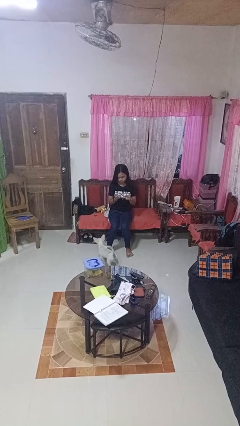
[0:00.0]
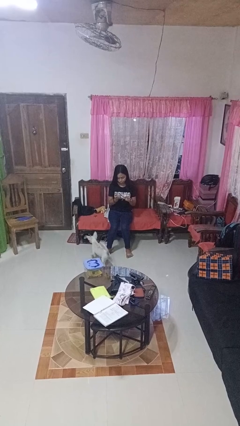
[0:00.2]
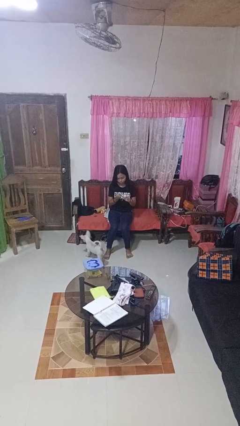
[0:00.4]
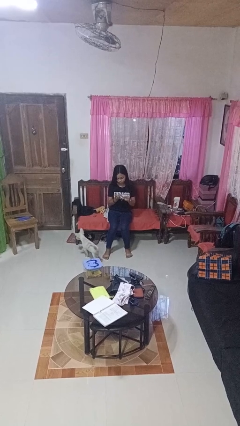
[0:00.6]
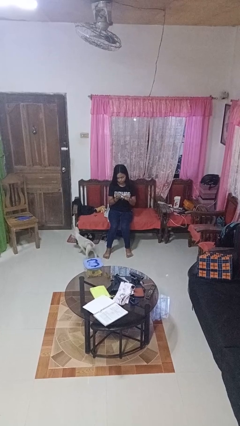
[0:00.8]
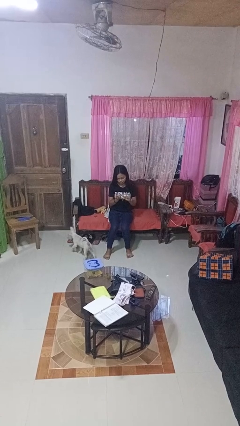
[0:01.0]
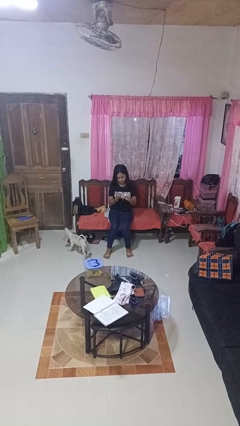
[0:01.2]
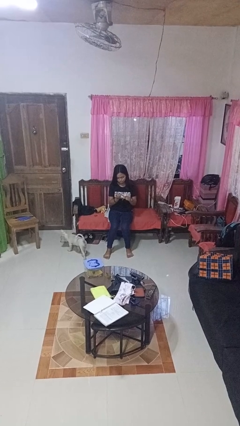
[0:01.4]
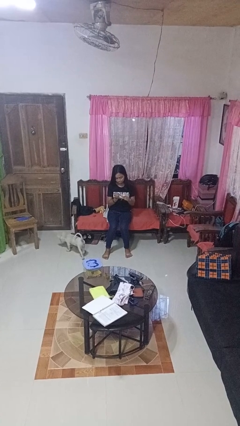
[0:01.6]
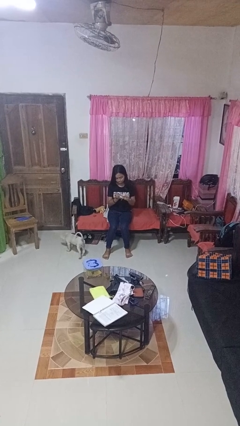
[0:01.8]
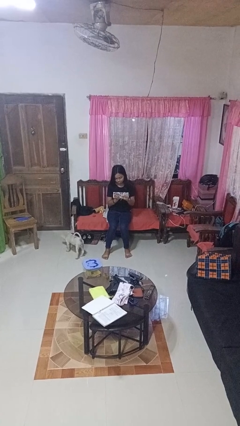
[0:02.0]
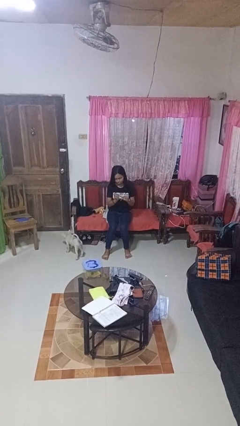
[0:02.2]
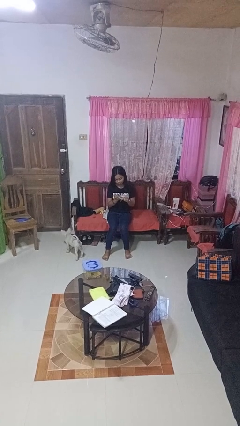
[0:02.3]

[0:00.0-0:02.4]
person files fingernails

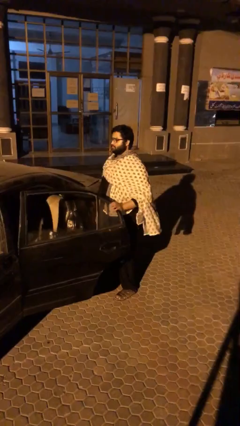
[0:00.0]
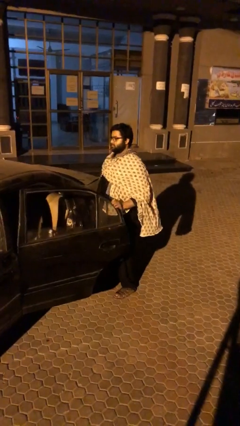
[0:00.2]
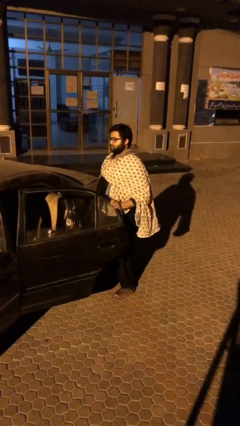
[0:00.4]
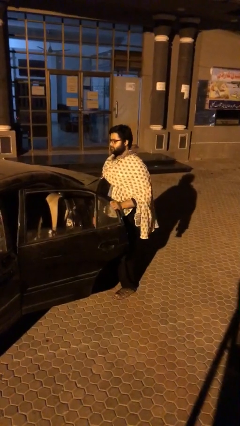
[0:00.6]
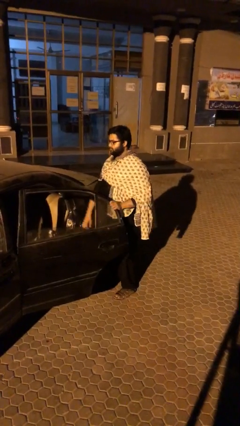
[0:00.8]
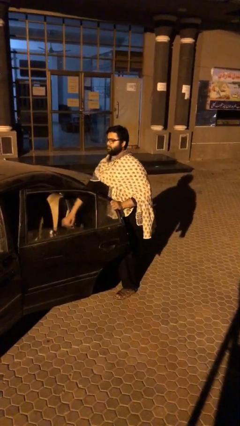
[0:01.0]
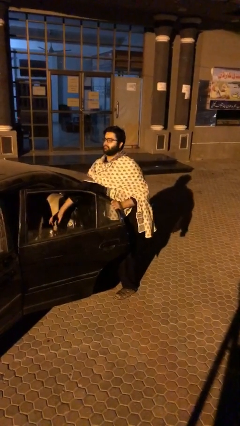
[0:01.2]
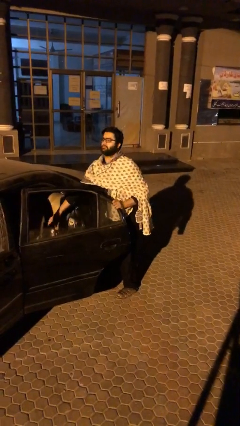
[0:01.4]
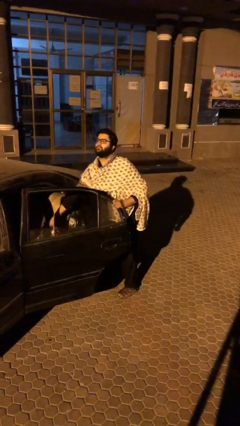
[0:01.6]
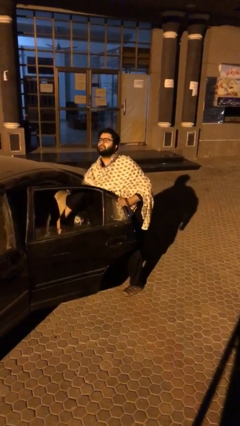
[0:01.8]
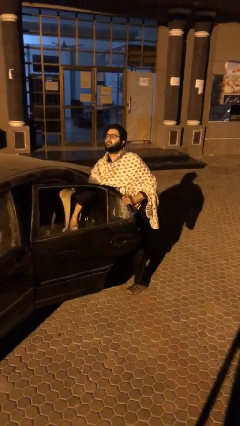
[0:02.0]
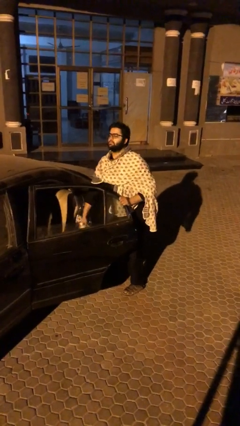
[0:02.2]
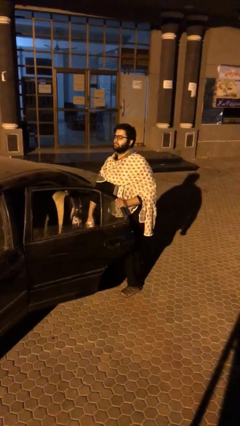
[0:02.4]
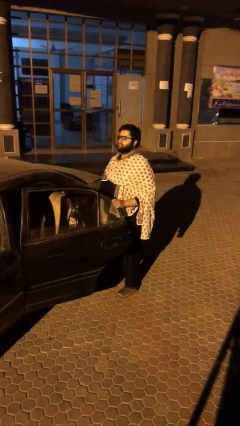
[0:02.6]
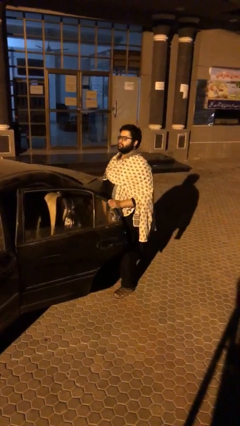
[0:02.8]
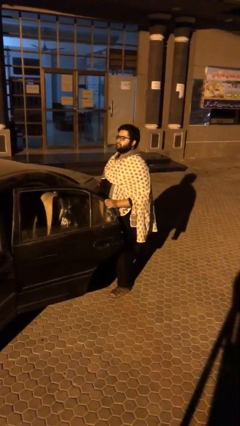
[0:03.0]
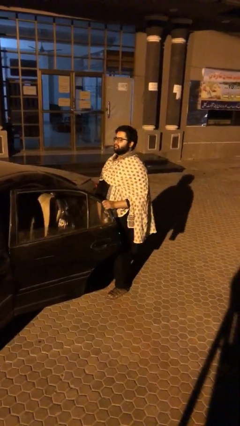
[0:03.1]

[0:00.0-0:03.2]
person unloads car

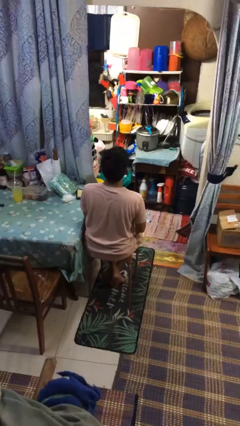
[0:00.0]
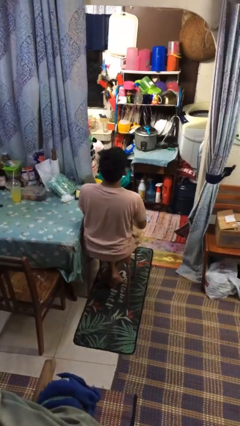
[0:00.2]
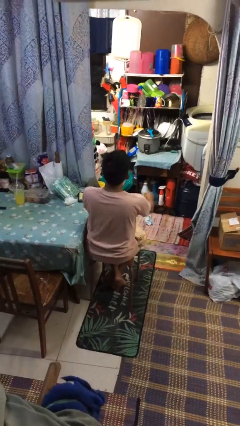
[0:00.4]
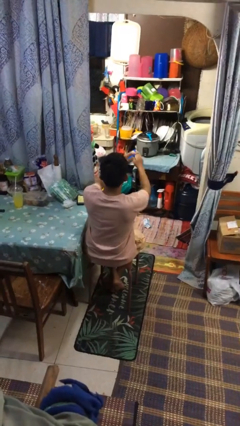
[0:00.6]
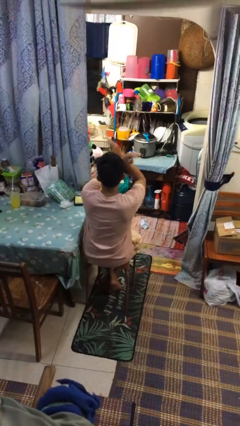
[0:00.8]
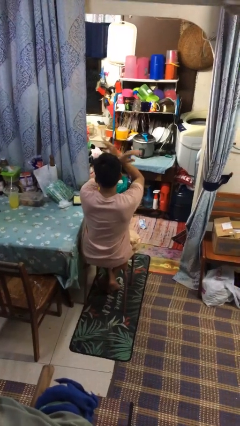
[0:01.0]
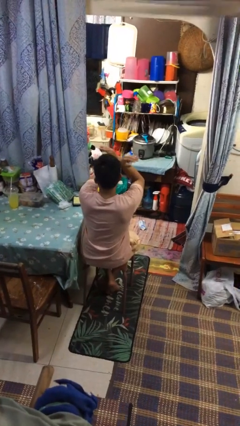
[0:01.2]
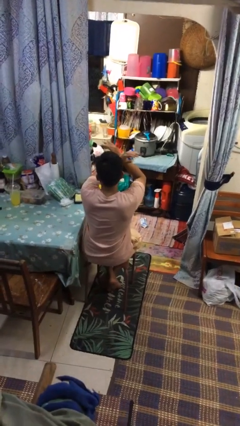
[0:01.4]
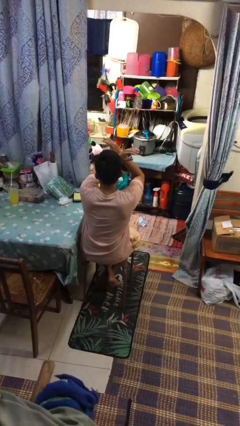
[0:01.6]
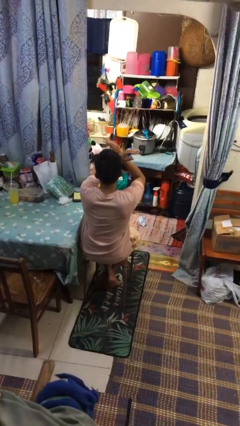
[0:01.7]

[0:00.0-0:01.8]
person gestures arms x

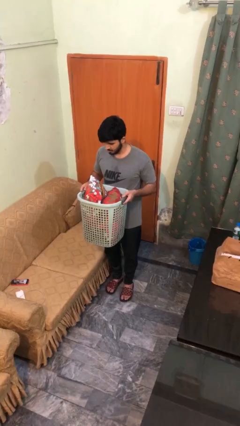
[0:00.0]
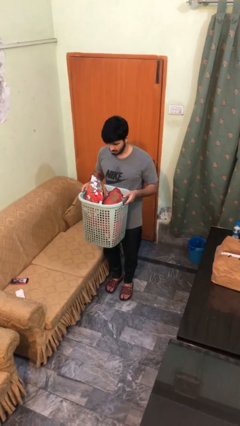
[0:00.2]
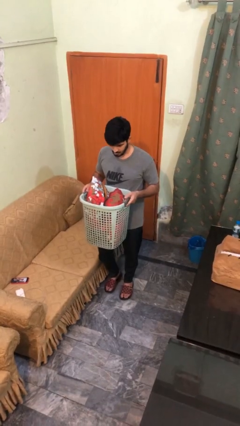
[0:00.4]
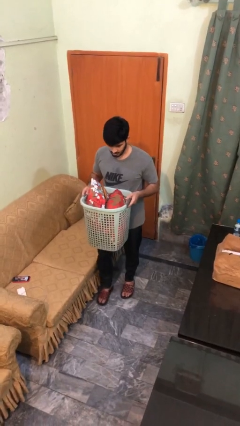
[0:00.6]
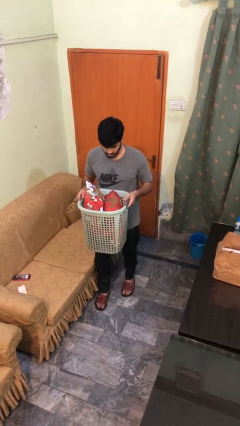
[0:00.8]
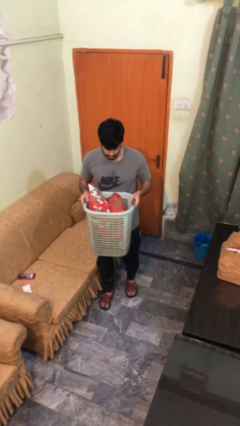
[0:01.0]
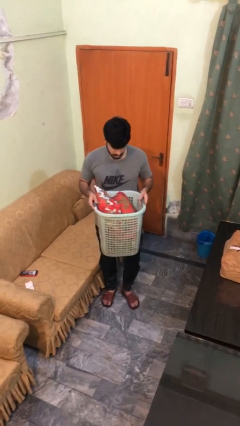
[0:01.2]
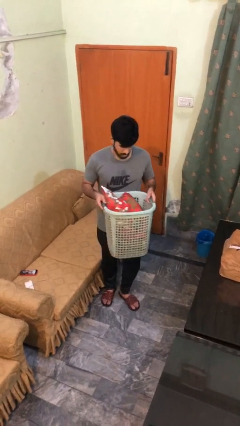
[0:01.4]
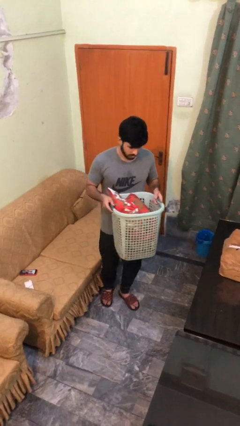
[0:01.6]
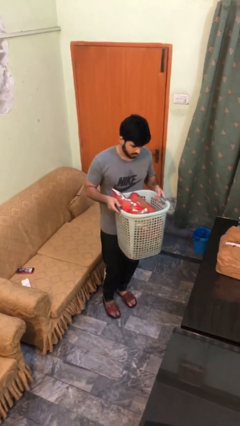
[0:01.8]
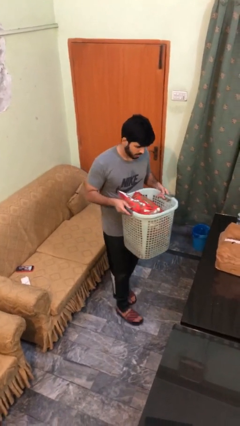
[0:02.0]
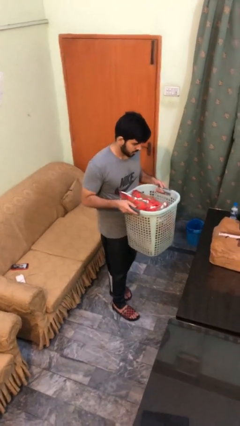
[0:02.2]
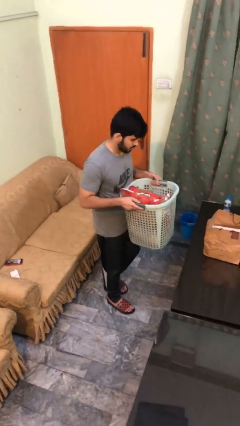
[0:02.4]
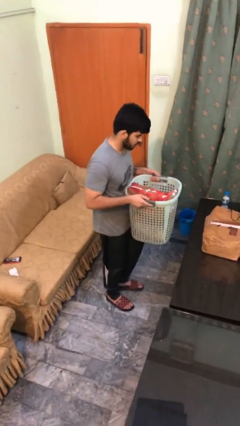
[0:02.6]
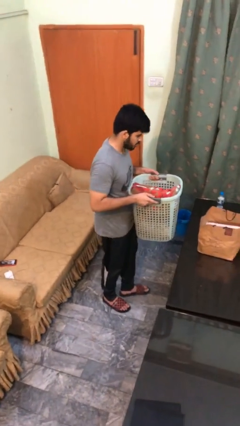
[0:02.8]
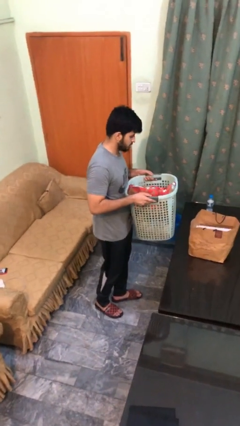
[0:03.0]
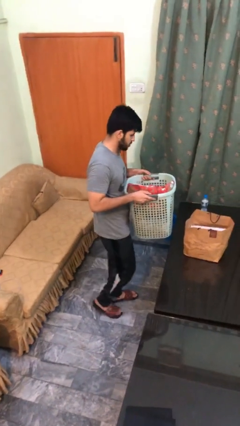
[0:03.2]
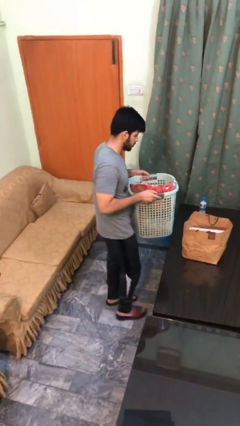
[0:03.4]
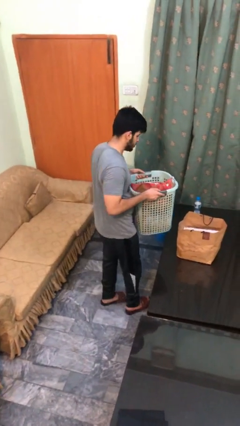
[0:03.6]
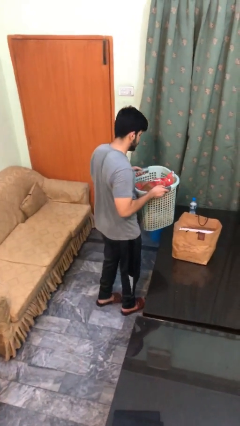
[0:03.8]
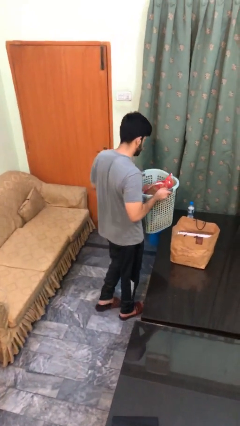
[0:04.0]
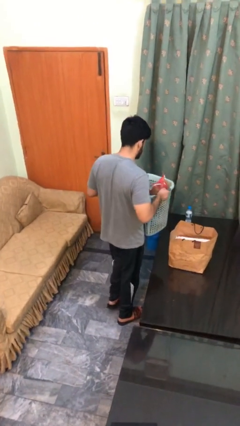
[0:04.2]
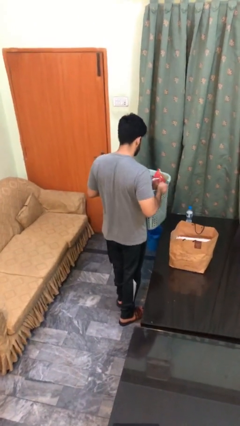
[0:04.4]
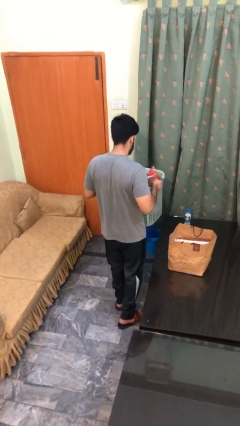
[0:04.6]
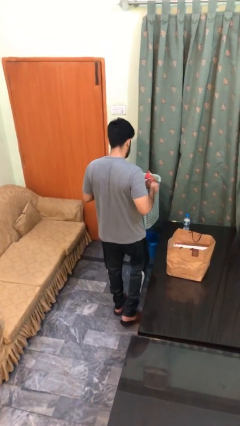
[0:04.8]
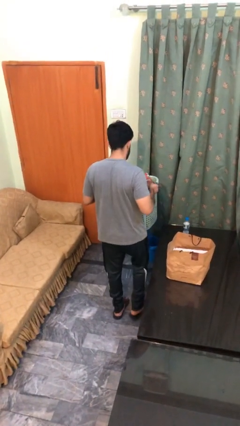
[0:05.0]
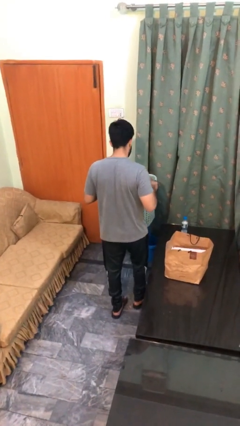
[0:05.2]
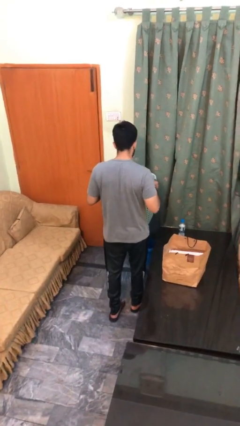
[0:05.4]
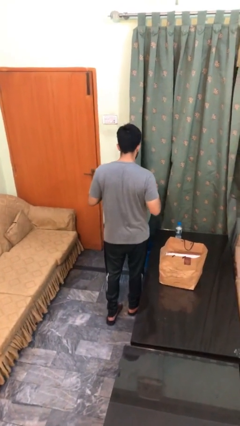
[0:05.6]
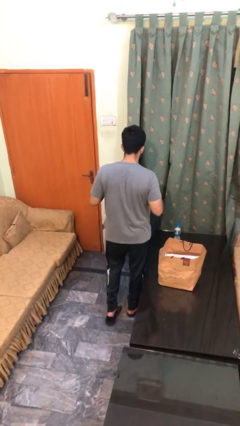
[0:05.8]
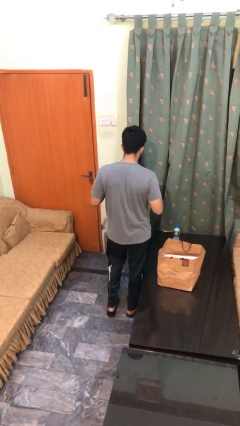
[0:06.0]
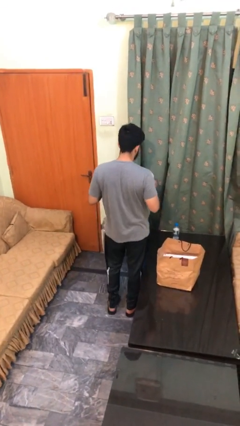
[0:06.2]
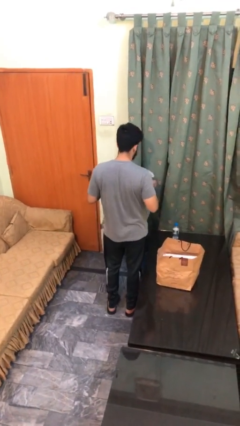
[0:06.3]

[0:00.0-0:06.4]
person carries laundry basket

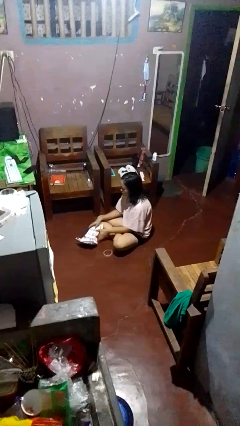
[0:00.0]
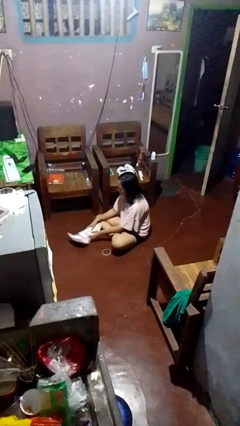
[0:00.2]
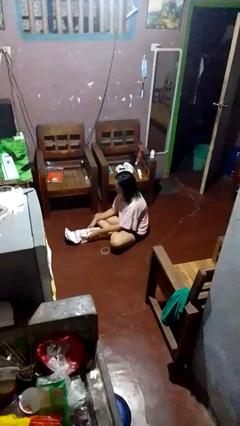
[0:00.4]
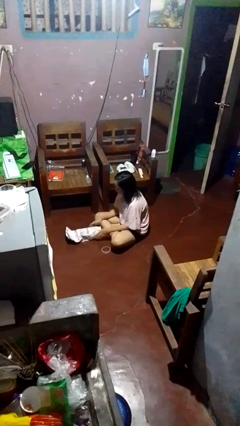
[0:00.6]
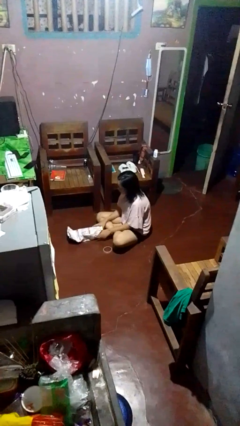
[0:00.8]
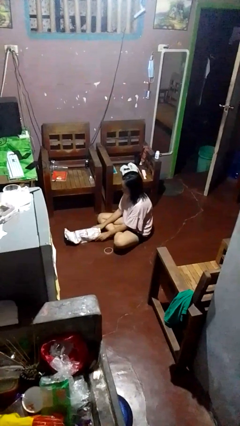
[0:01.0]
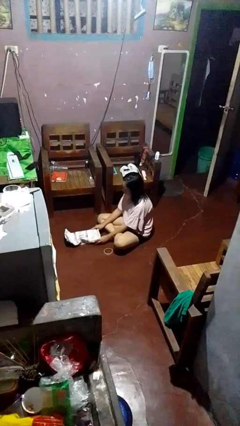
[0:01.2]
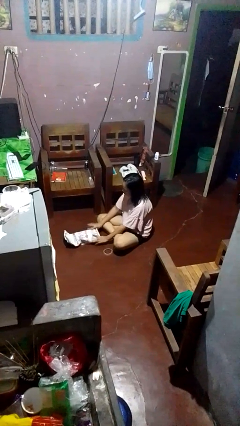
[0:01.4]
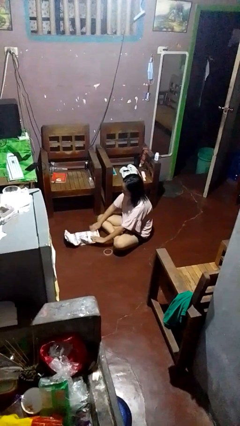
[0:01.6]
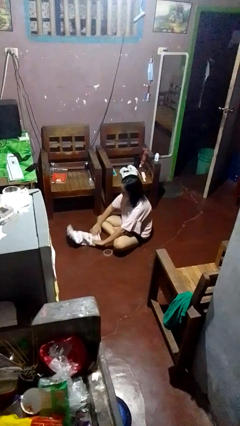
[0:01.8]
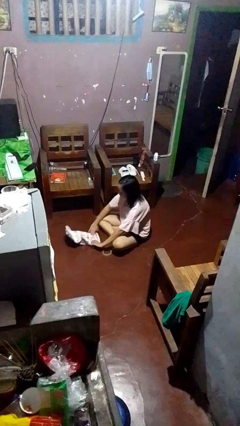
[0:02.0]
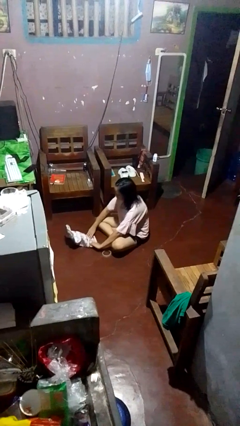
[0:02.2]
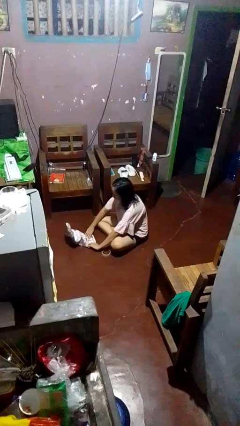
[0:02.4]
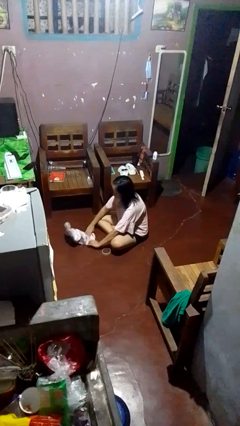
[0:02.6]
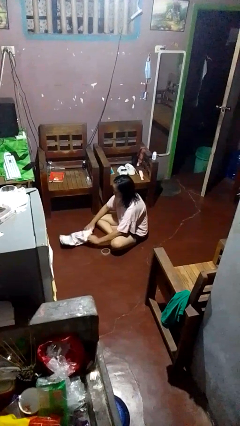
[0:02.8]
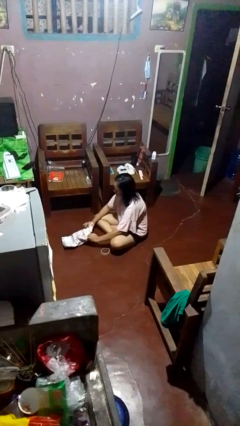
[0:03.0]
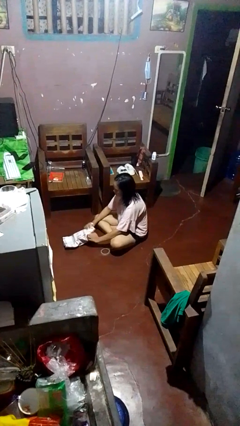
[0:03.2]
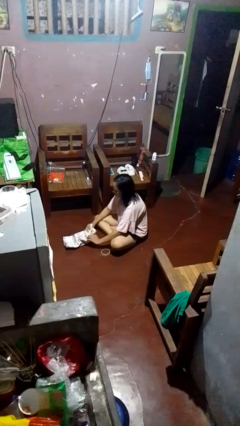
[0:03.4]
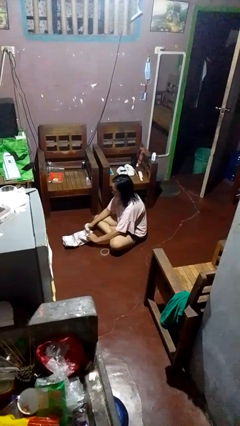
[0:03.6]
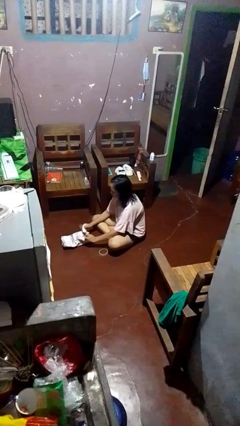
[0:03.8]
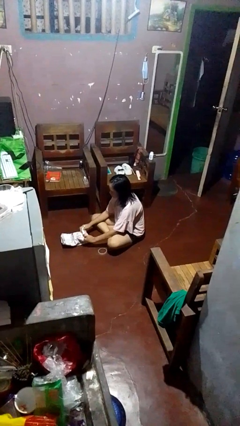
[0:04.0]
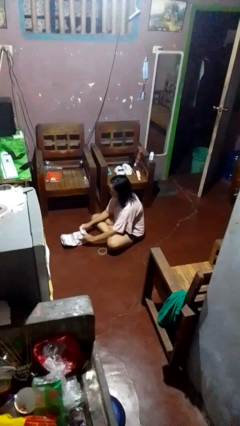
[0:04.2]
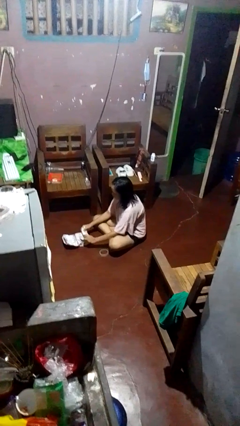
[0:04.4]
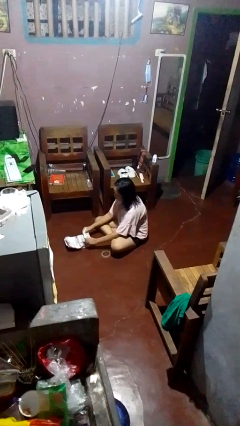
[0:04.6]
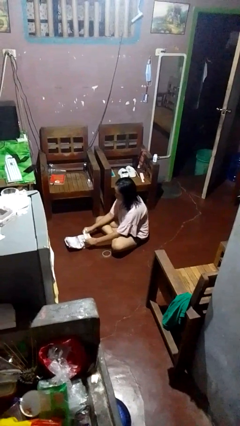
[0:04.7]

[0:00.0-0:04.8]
person wraps box
